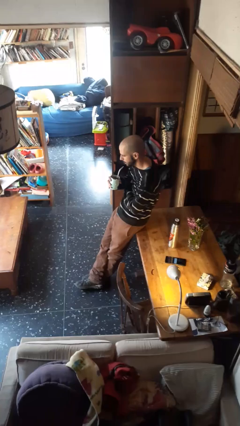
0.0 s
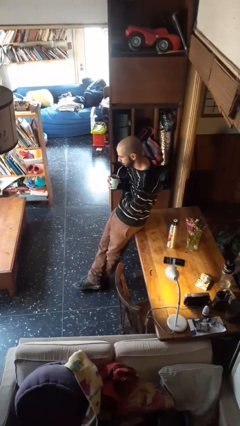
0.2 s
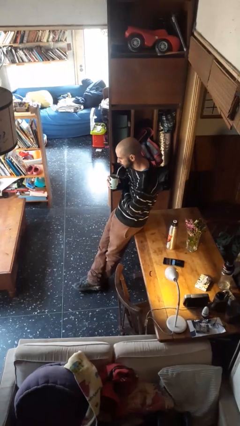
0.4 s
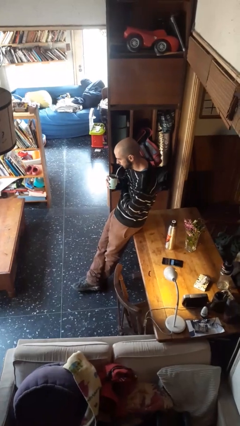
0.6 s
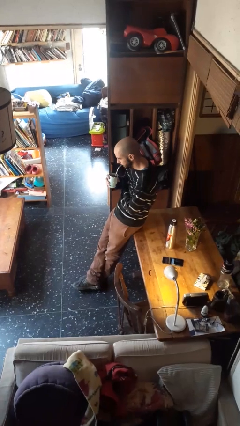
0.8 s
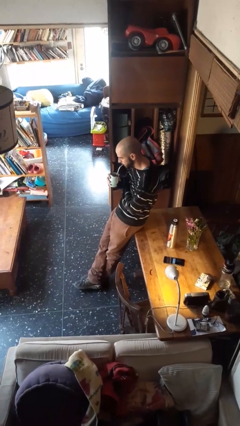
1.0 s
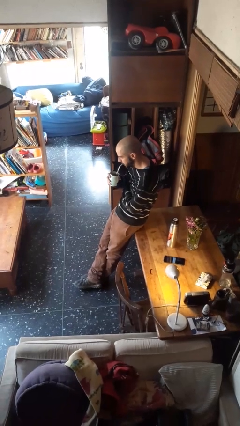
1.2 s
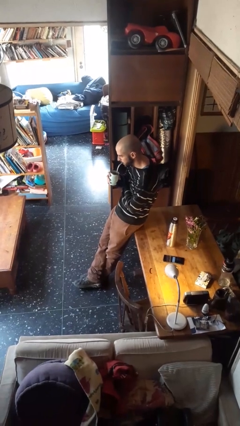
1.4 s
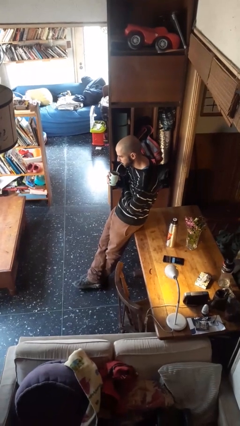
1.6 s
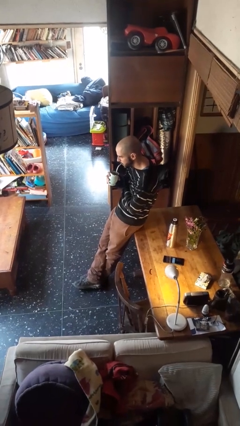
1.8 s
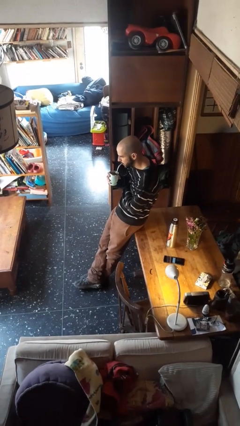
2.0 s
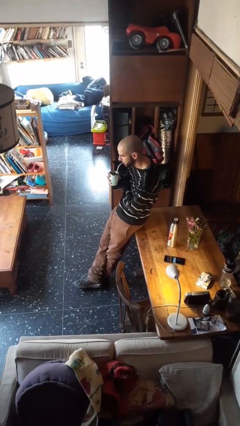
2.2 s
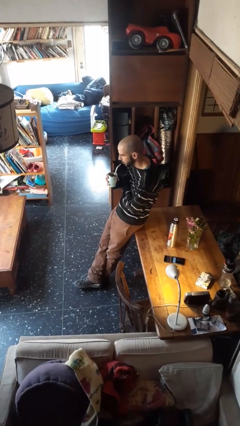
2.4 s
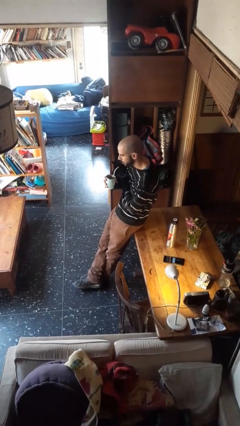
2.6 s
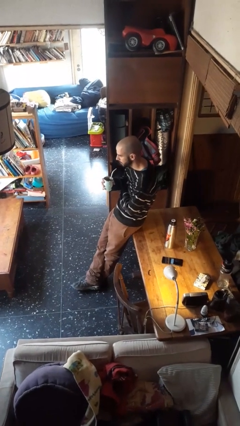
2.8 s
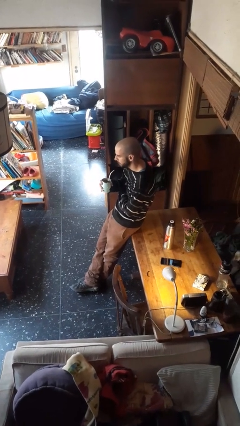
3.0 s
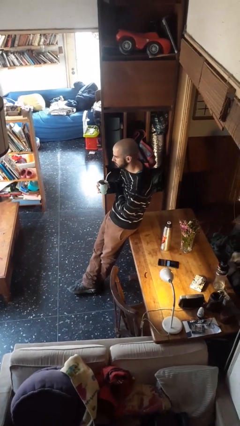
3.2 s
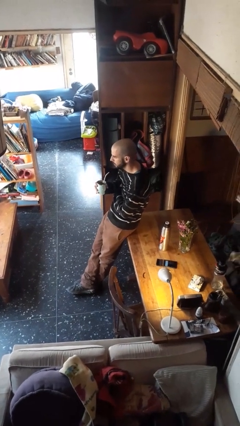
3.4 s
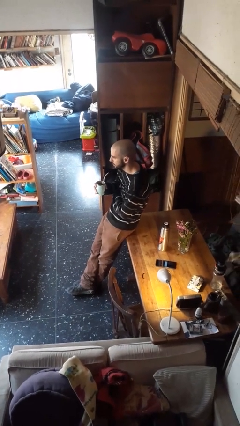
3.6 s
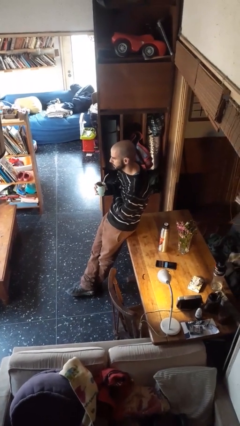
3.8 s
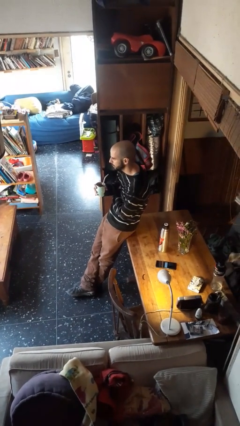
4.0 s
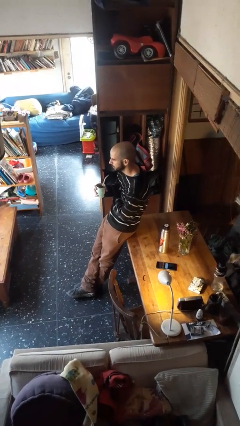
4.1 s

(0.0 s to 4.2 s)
person drinks from straw

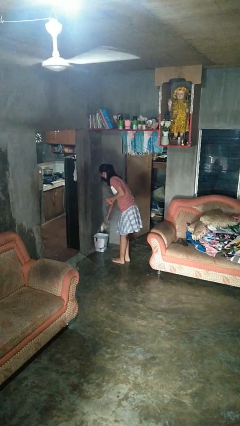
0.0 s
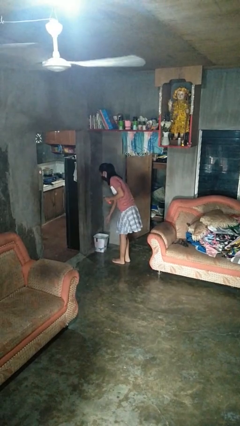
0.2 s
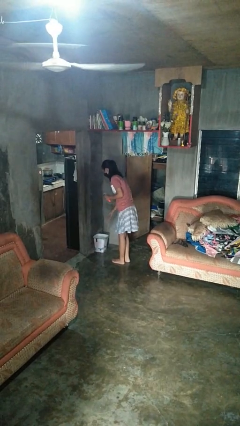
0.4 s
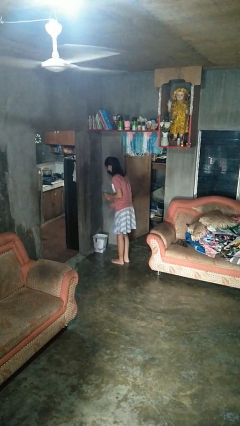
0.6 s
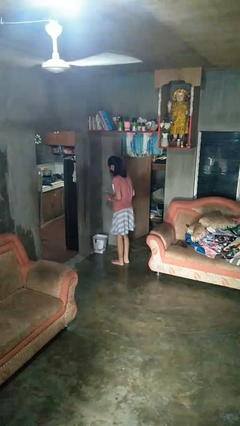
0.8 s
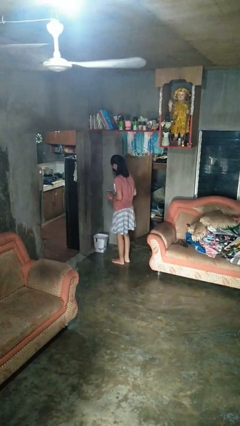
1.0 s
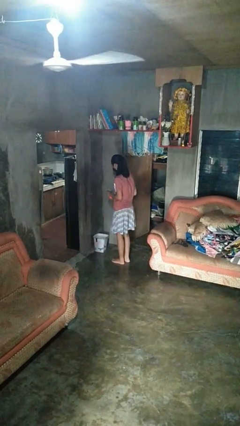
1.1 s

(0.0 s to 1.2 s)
person discards trash

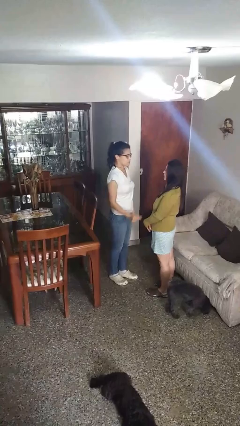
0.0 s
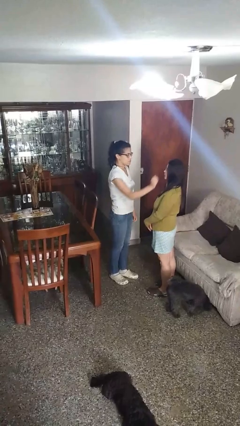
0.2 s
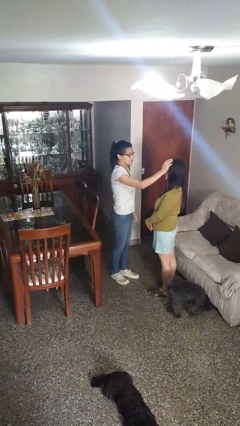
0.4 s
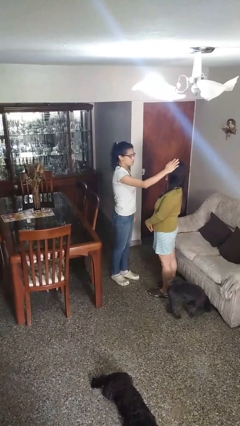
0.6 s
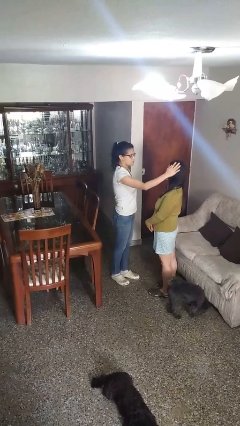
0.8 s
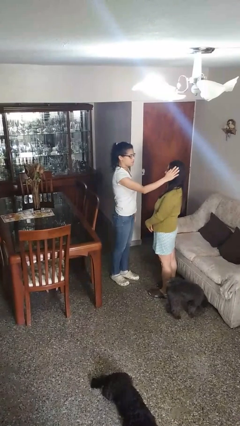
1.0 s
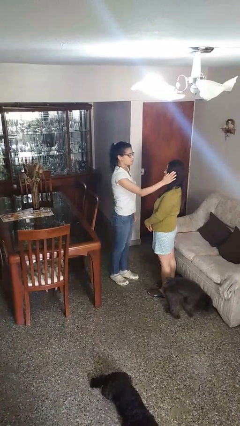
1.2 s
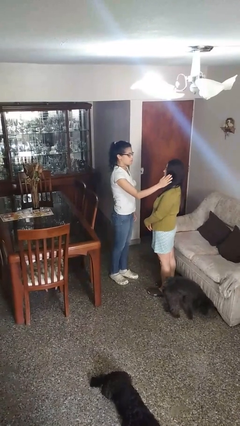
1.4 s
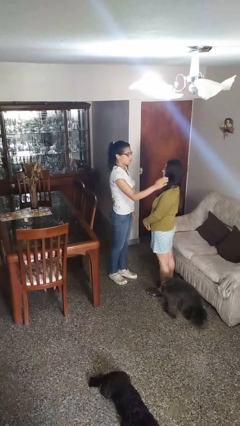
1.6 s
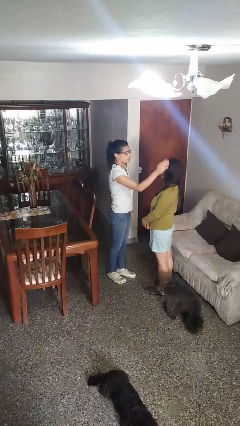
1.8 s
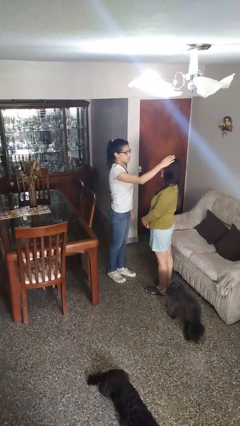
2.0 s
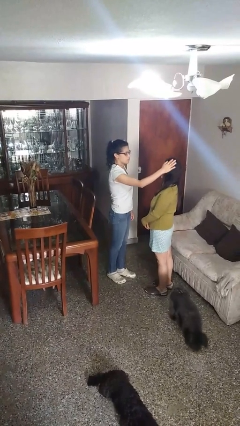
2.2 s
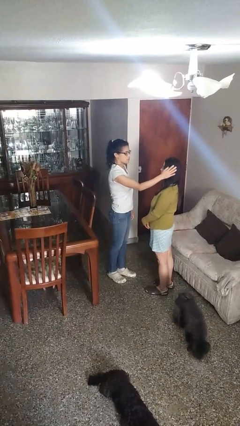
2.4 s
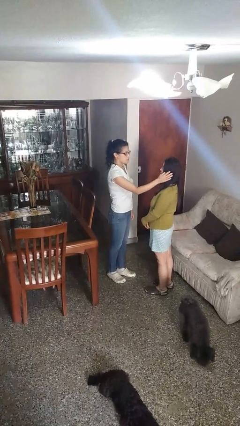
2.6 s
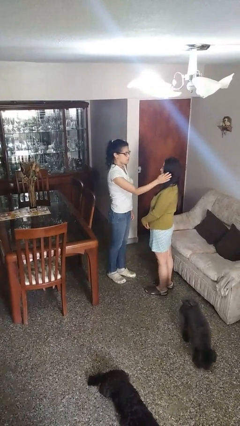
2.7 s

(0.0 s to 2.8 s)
person touches face of person

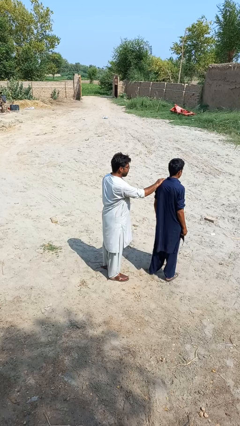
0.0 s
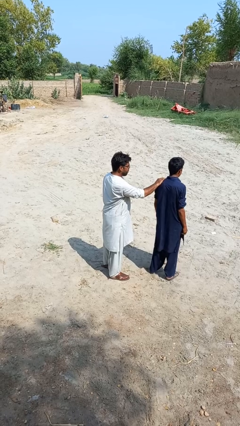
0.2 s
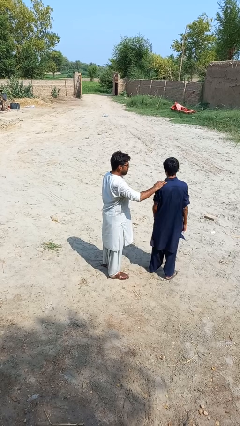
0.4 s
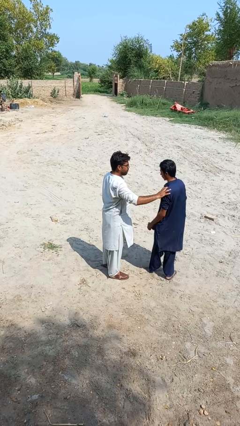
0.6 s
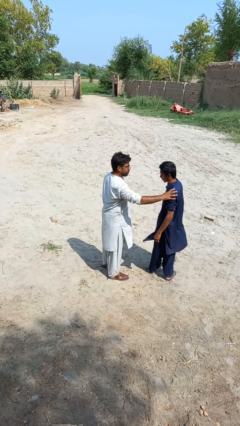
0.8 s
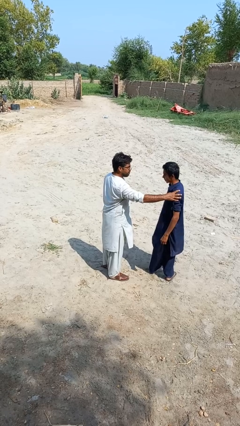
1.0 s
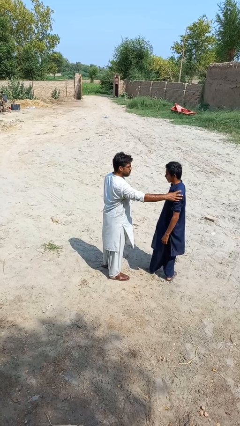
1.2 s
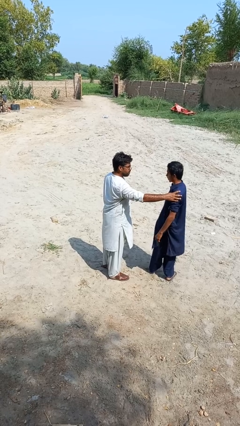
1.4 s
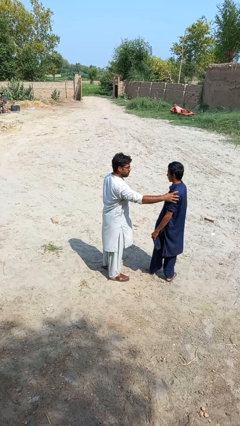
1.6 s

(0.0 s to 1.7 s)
person spins person around

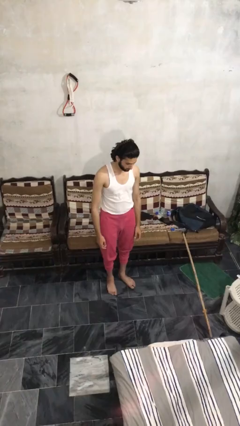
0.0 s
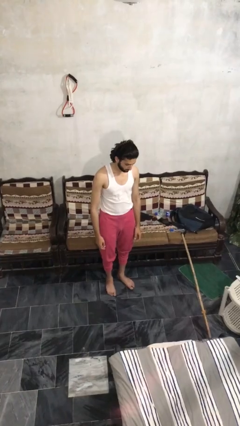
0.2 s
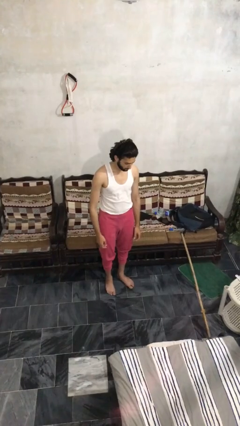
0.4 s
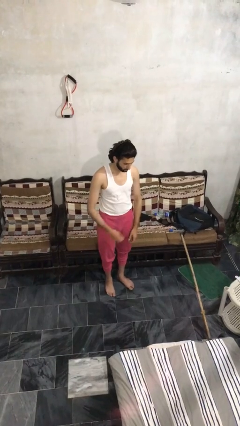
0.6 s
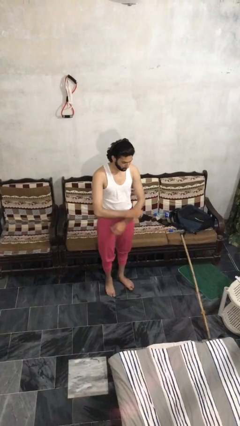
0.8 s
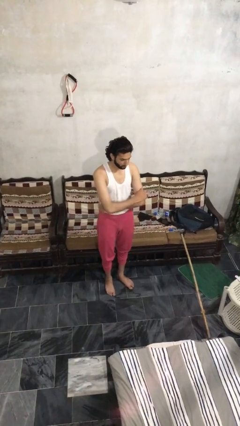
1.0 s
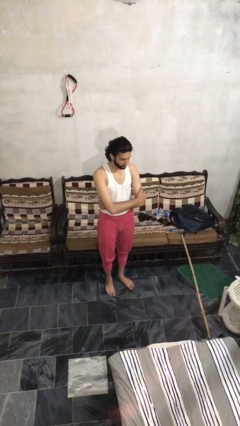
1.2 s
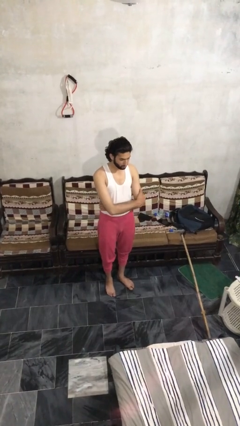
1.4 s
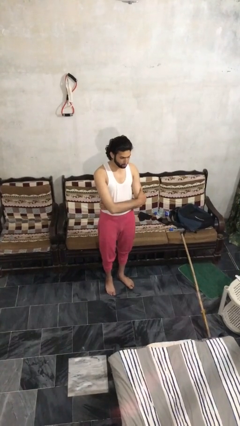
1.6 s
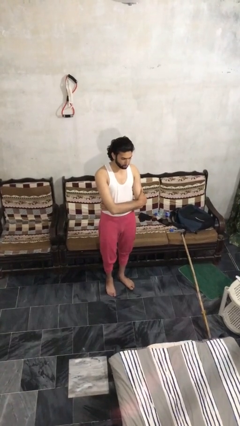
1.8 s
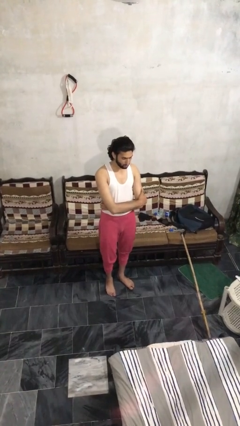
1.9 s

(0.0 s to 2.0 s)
person crosses arms

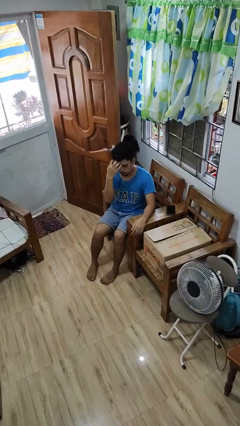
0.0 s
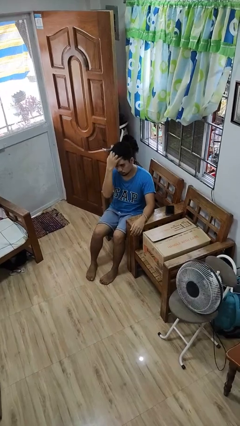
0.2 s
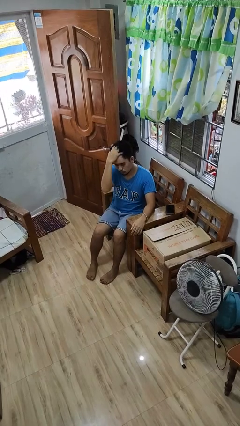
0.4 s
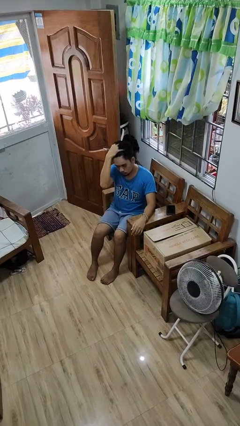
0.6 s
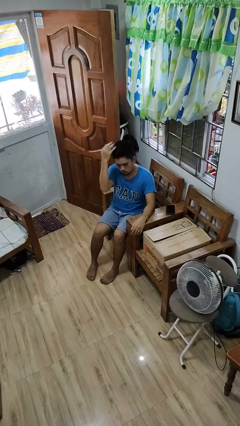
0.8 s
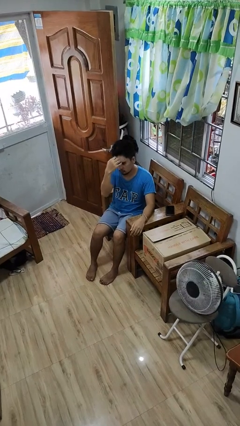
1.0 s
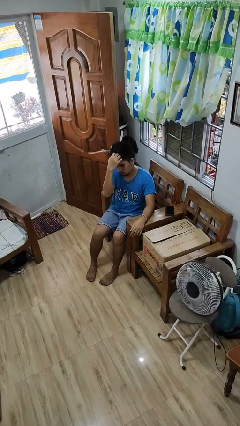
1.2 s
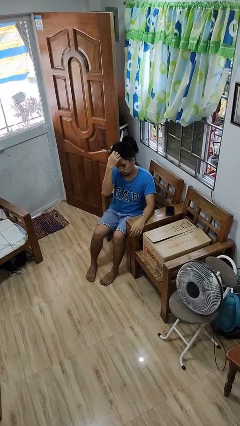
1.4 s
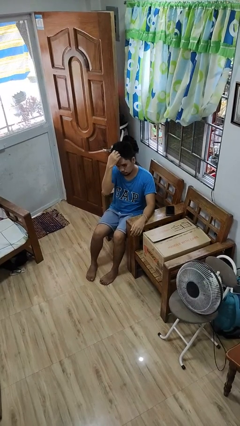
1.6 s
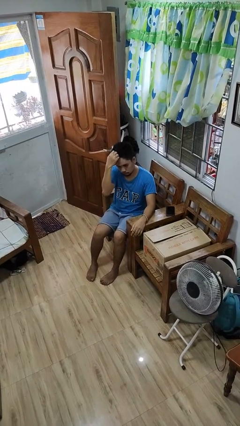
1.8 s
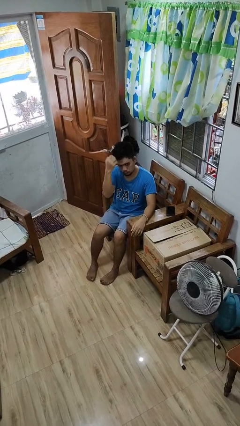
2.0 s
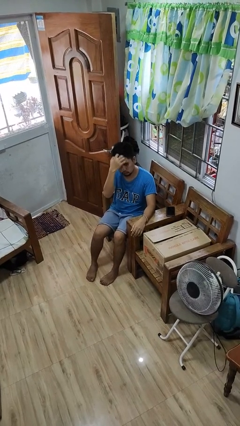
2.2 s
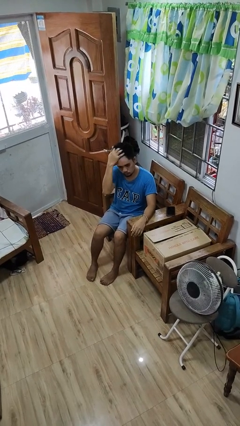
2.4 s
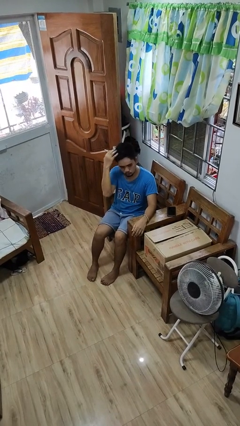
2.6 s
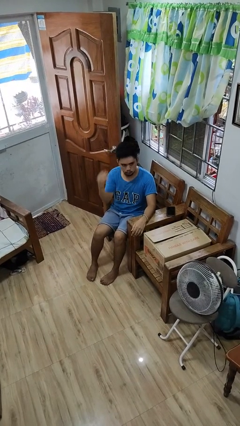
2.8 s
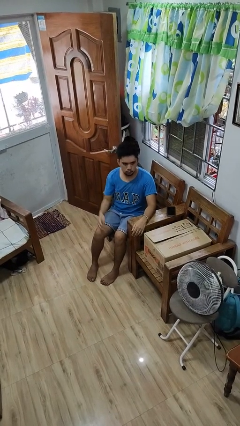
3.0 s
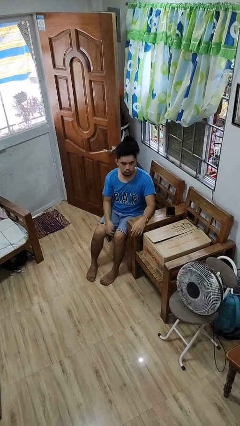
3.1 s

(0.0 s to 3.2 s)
person strokes hair

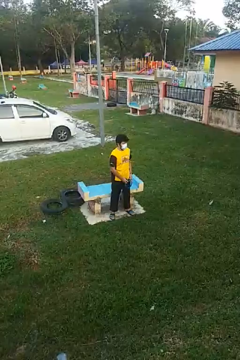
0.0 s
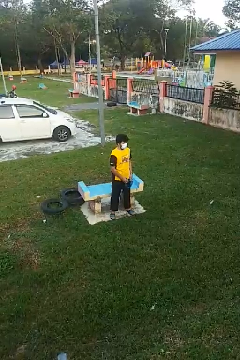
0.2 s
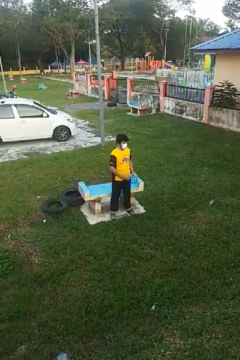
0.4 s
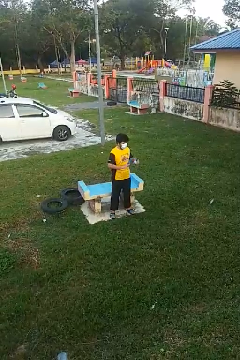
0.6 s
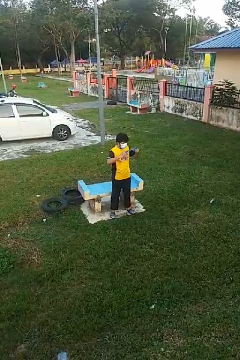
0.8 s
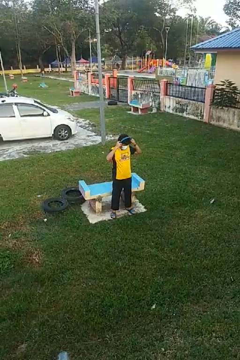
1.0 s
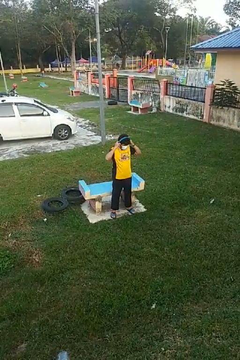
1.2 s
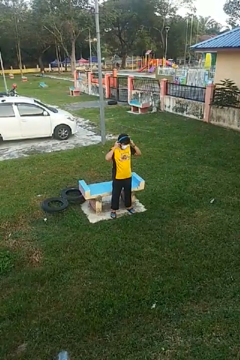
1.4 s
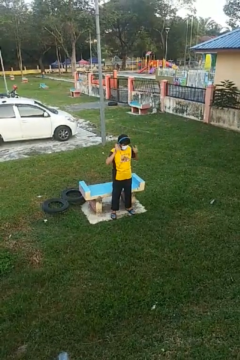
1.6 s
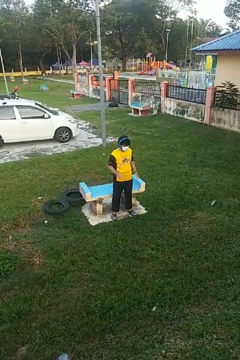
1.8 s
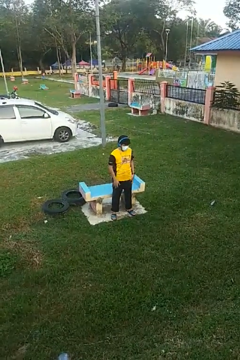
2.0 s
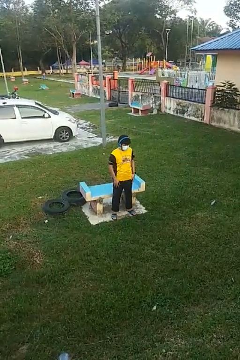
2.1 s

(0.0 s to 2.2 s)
person puts on headphones

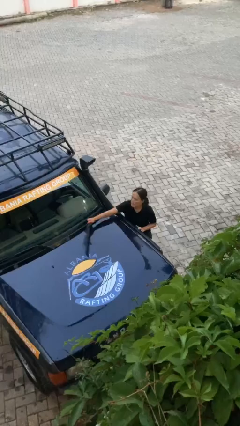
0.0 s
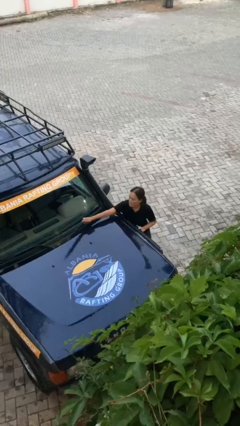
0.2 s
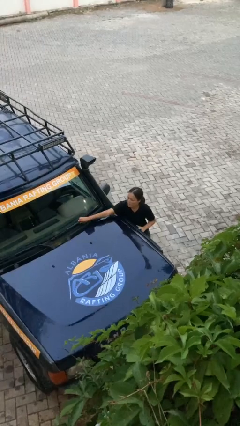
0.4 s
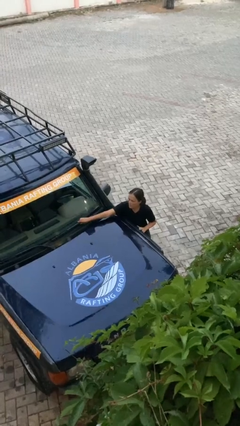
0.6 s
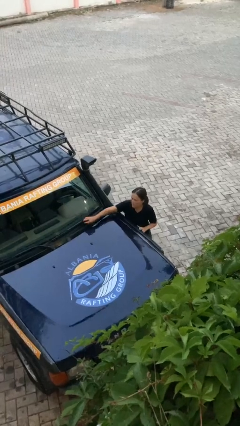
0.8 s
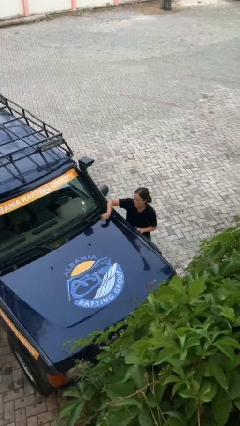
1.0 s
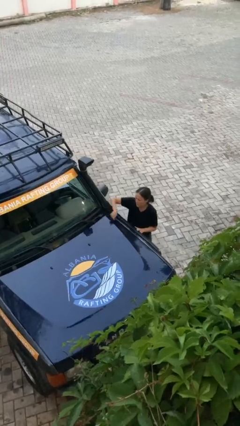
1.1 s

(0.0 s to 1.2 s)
person flips down car wipers
